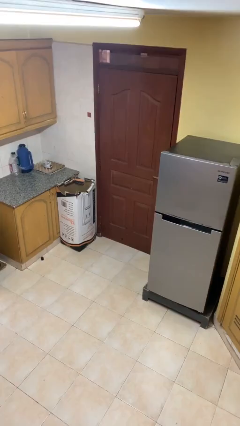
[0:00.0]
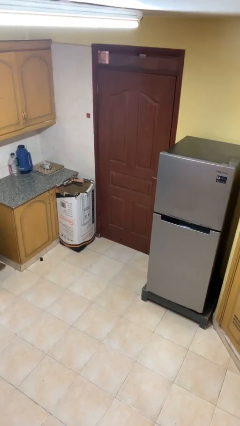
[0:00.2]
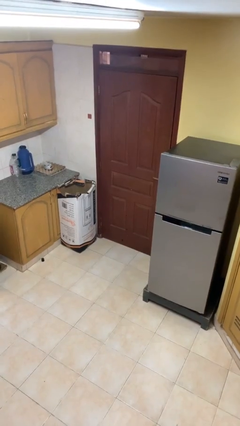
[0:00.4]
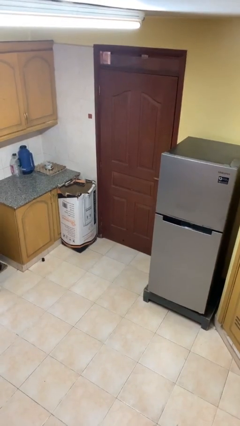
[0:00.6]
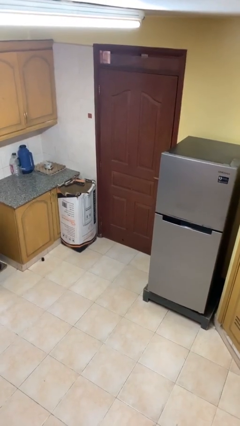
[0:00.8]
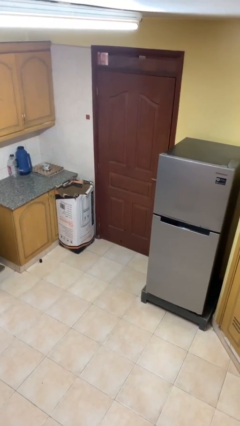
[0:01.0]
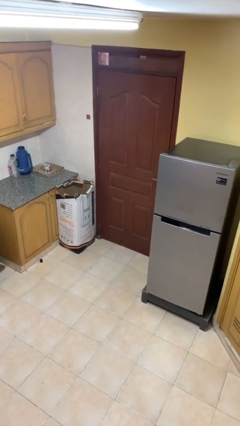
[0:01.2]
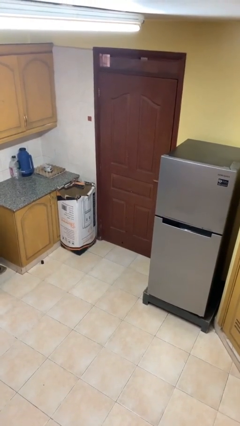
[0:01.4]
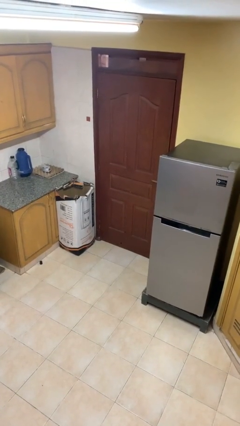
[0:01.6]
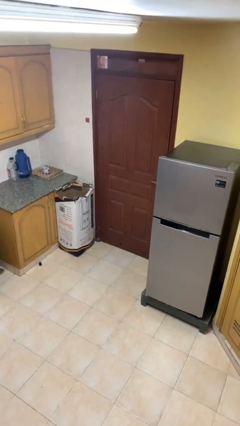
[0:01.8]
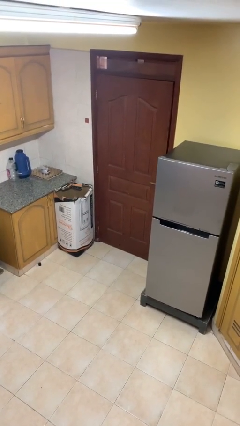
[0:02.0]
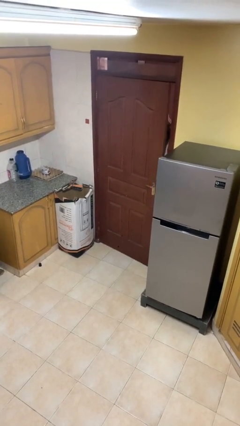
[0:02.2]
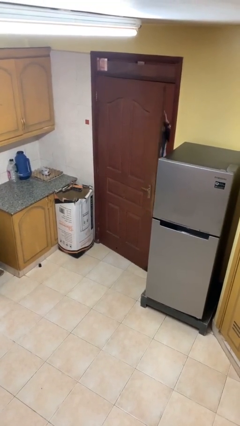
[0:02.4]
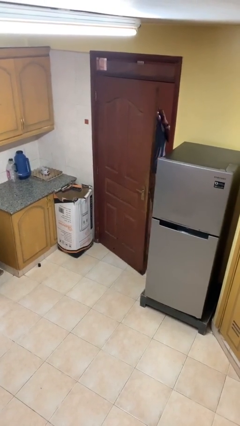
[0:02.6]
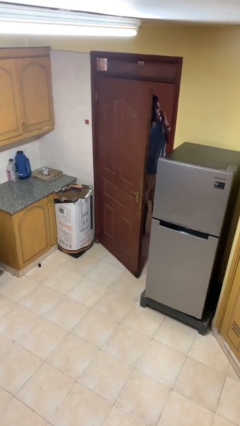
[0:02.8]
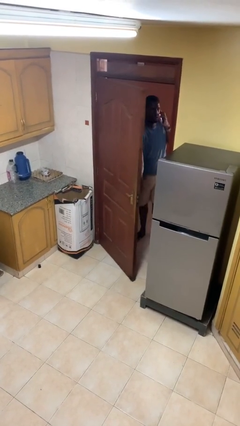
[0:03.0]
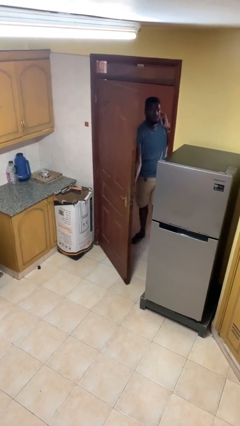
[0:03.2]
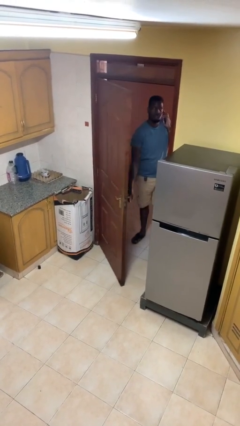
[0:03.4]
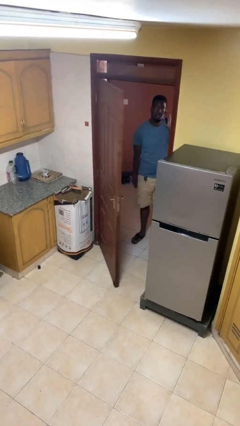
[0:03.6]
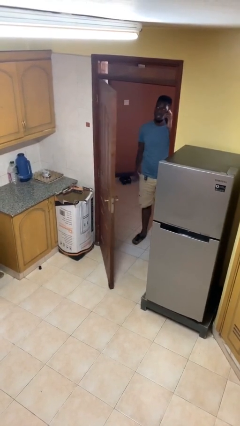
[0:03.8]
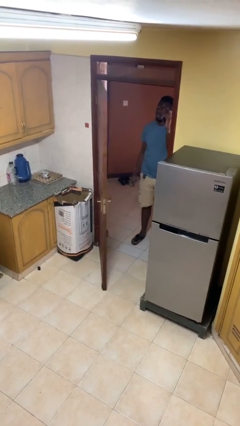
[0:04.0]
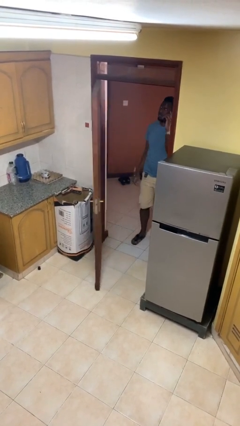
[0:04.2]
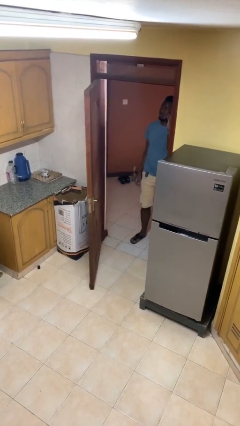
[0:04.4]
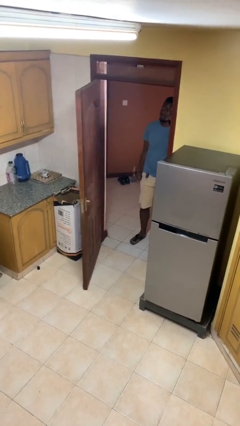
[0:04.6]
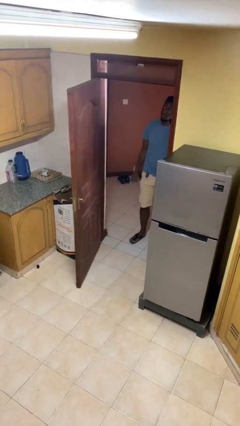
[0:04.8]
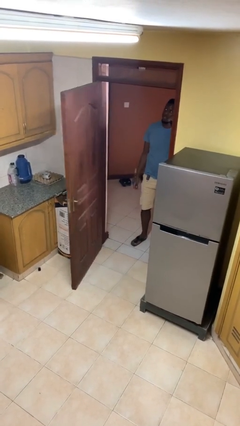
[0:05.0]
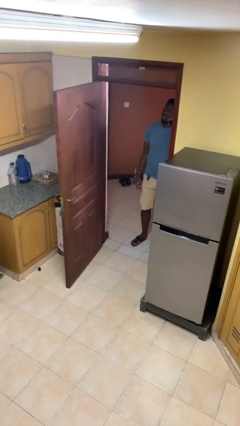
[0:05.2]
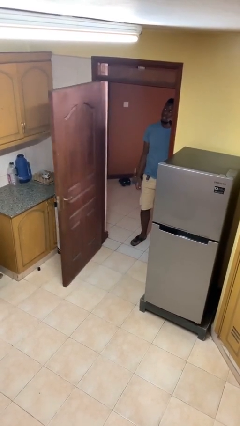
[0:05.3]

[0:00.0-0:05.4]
person opens facility door

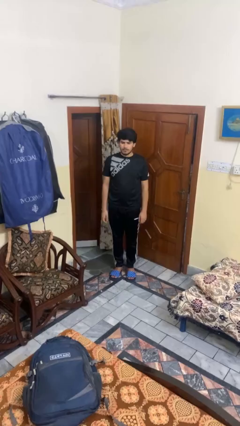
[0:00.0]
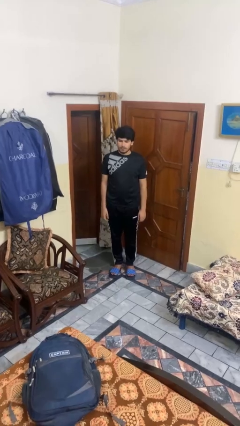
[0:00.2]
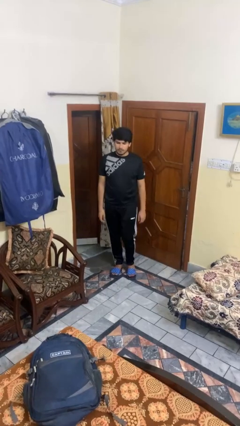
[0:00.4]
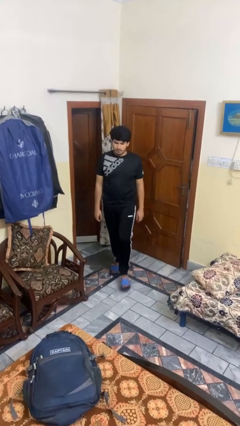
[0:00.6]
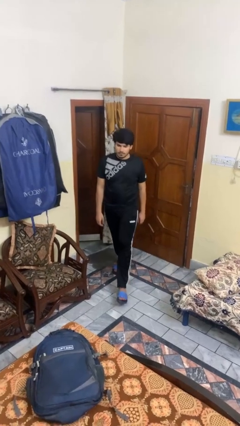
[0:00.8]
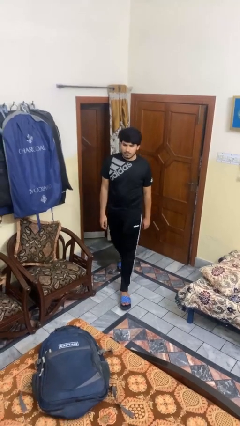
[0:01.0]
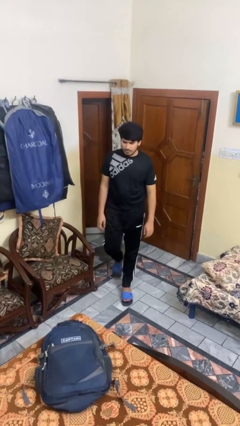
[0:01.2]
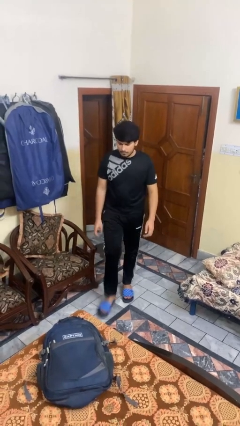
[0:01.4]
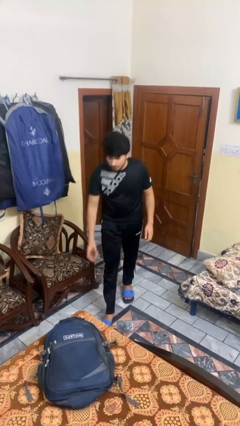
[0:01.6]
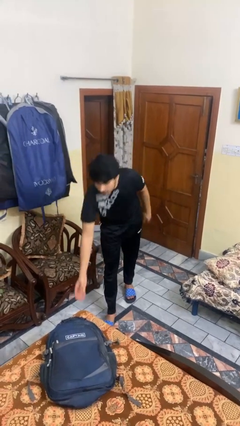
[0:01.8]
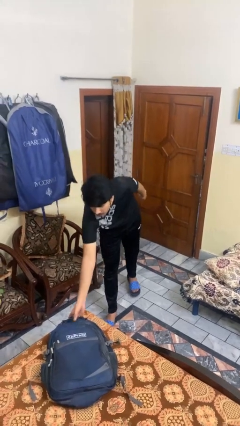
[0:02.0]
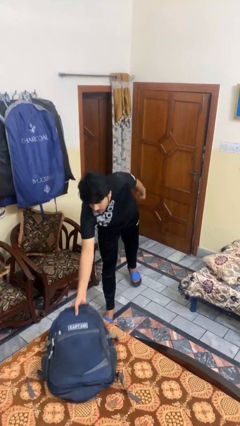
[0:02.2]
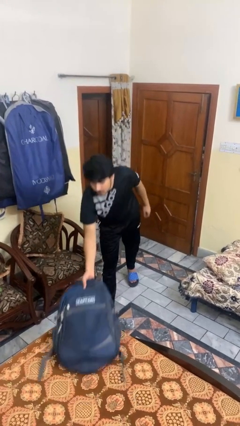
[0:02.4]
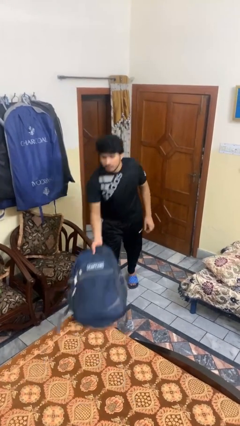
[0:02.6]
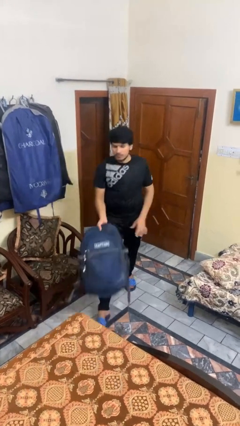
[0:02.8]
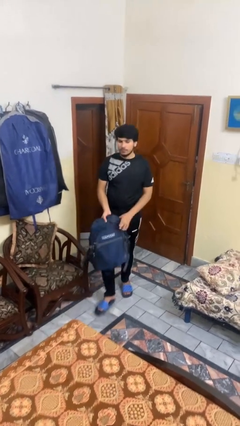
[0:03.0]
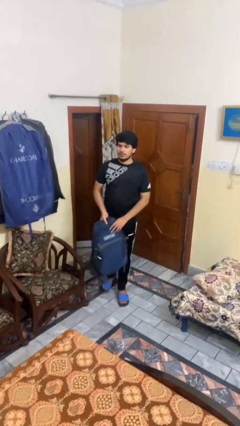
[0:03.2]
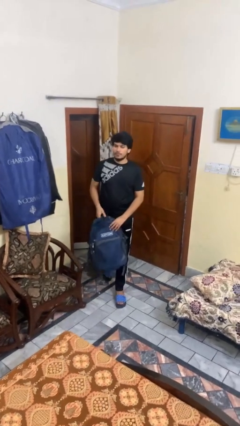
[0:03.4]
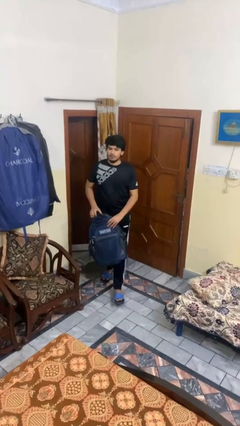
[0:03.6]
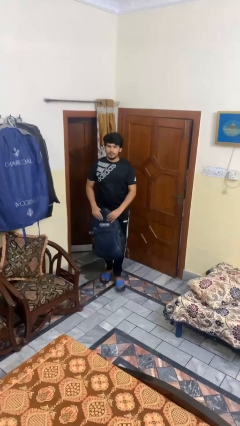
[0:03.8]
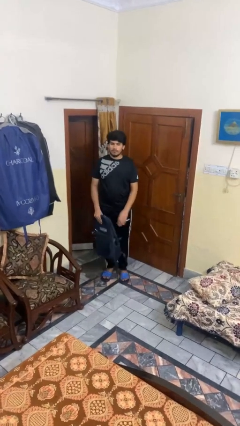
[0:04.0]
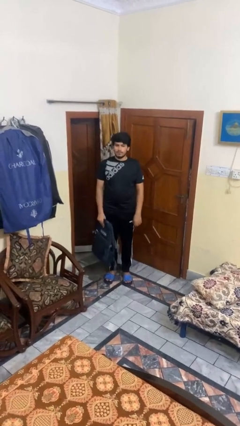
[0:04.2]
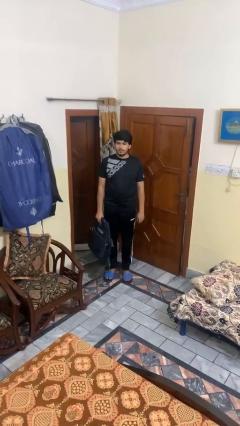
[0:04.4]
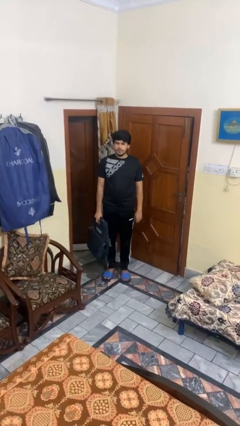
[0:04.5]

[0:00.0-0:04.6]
person picks up object from bed

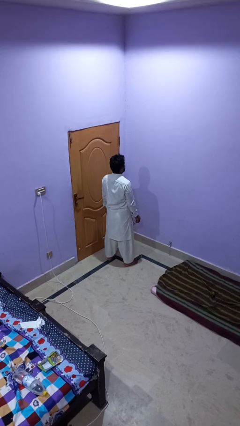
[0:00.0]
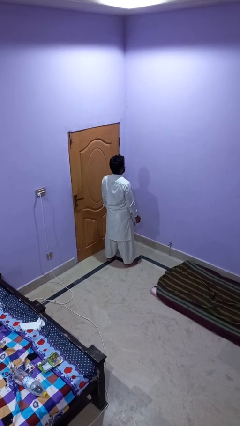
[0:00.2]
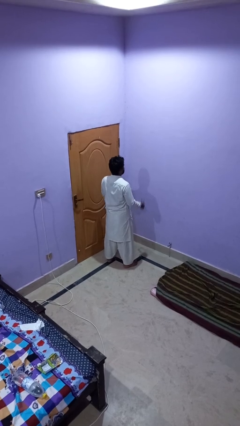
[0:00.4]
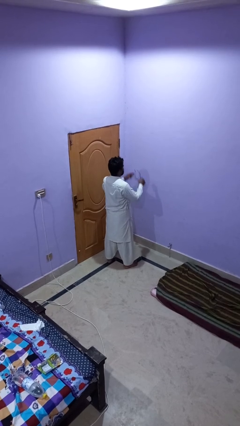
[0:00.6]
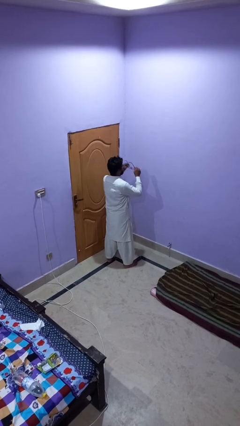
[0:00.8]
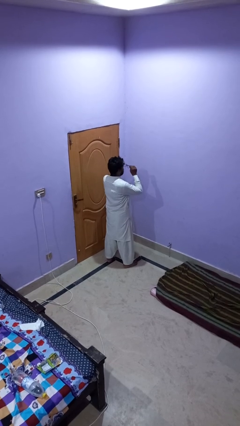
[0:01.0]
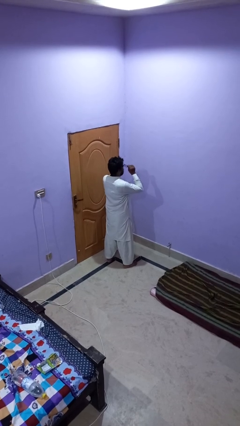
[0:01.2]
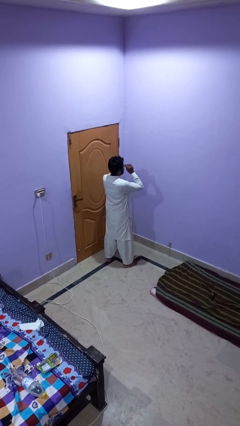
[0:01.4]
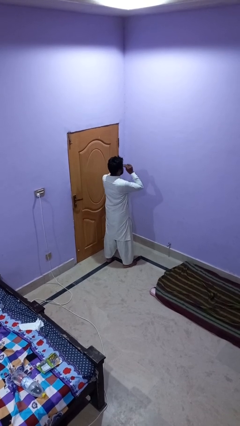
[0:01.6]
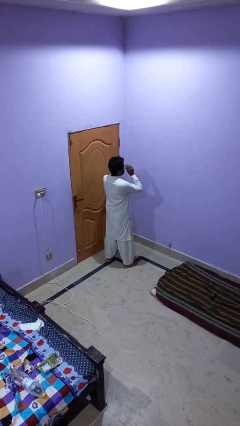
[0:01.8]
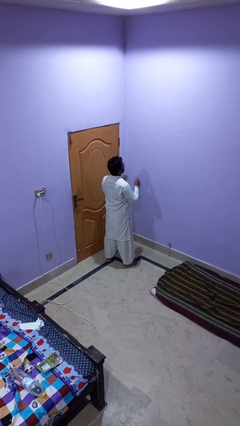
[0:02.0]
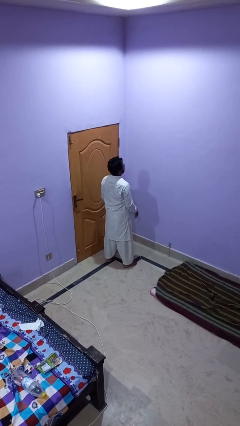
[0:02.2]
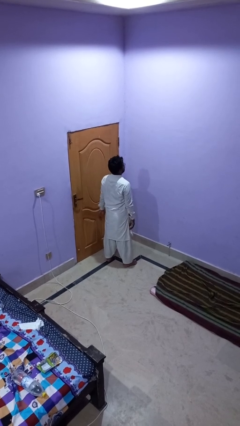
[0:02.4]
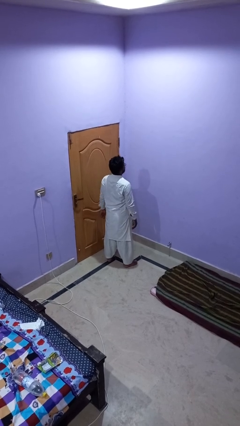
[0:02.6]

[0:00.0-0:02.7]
person puts on glasses

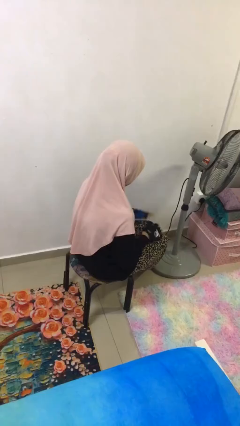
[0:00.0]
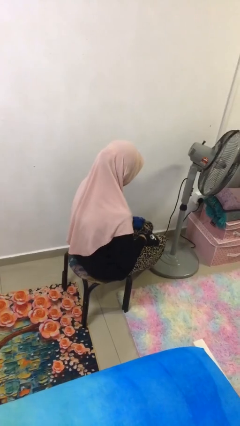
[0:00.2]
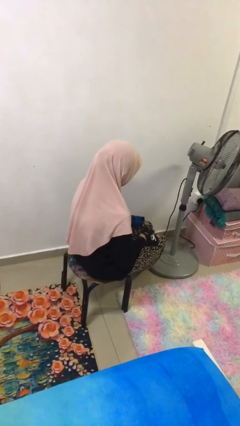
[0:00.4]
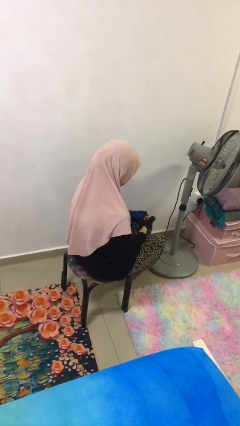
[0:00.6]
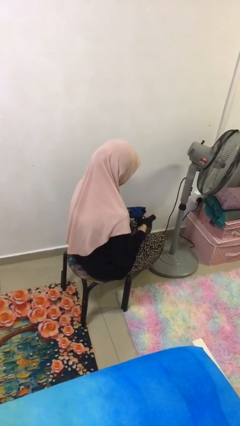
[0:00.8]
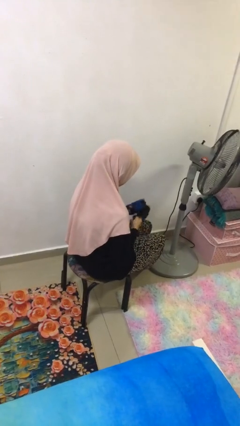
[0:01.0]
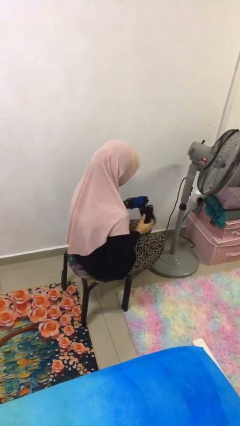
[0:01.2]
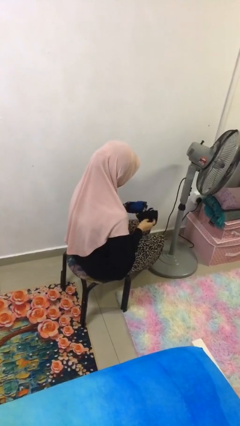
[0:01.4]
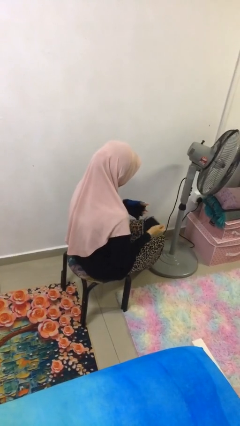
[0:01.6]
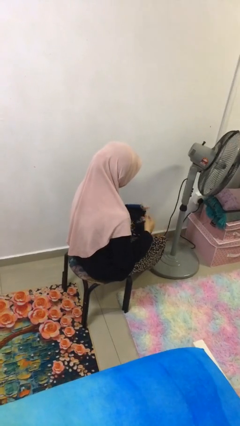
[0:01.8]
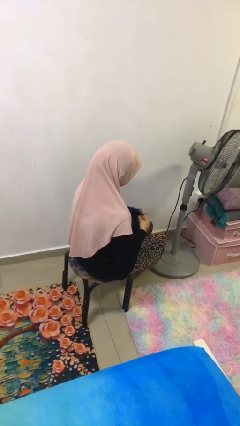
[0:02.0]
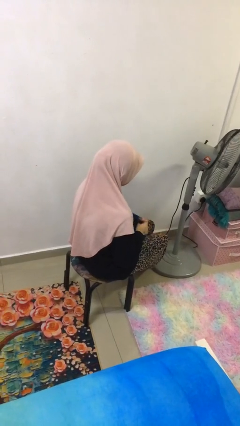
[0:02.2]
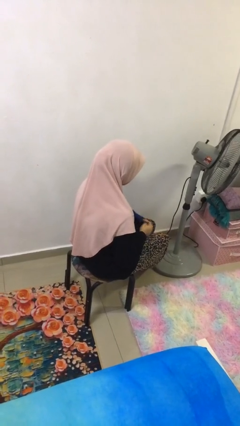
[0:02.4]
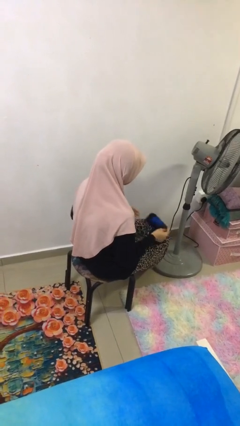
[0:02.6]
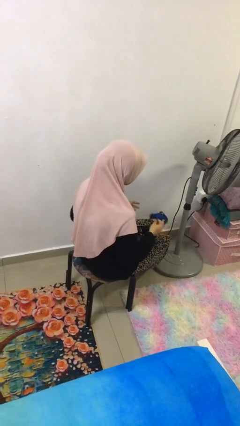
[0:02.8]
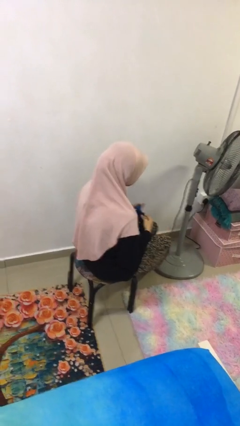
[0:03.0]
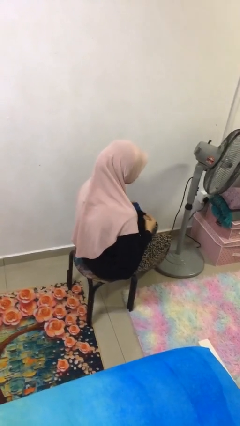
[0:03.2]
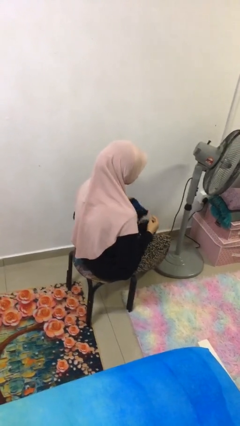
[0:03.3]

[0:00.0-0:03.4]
person takes off gloves

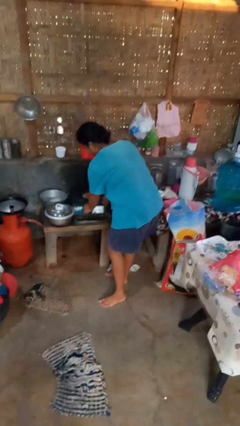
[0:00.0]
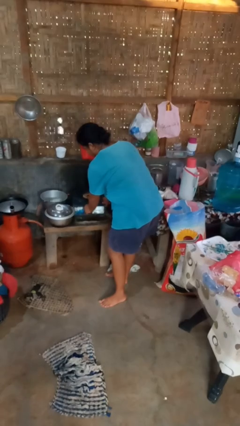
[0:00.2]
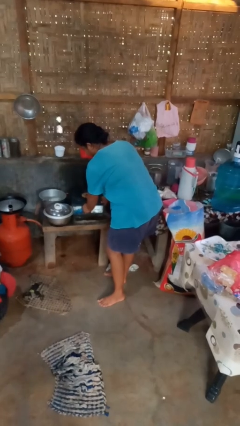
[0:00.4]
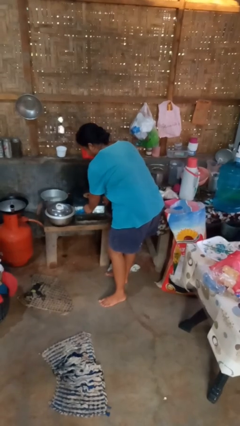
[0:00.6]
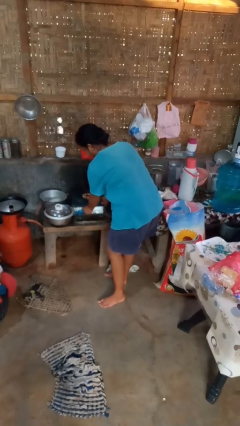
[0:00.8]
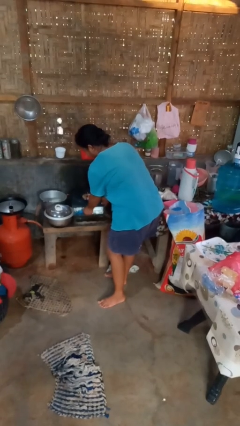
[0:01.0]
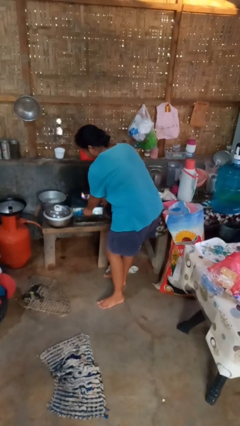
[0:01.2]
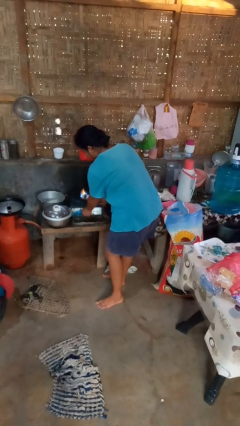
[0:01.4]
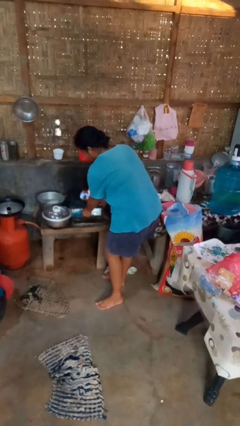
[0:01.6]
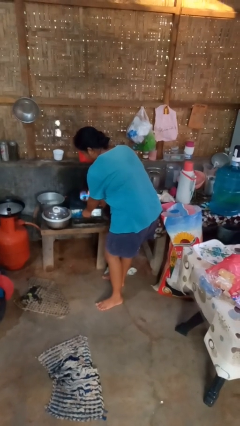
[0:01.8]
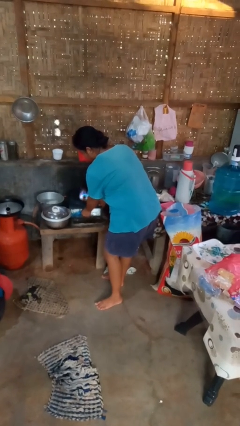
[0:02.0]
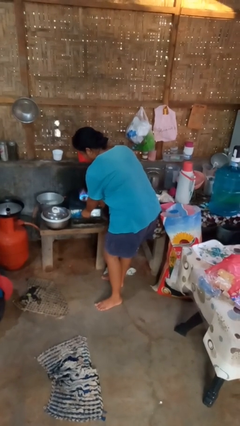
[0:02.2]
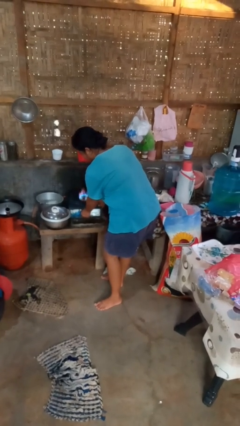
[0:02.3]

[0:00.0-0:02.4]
person turns on stovetop
